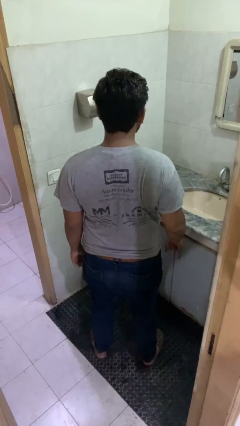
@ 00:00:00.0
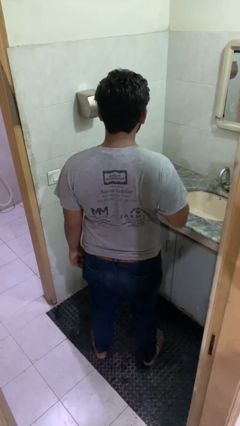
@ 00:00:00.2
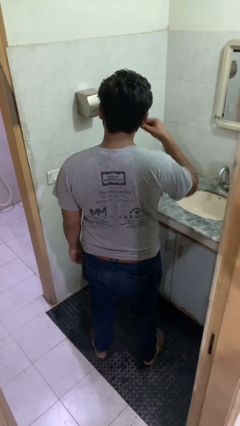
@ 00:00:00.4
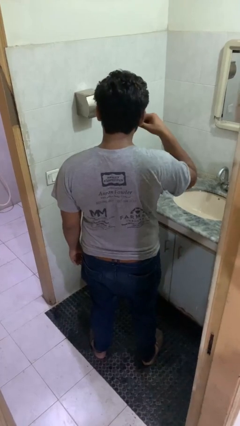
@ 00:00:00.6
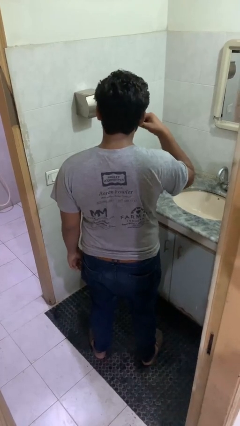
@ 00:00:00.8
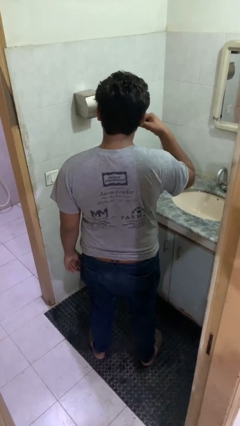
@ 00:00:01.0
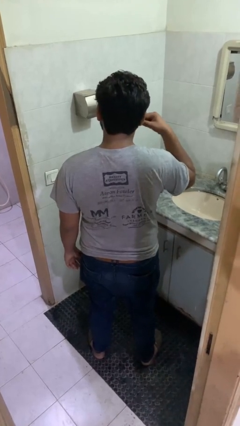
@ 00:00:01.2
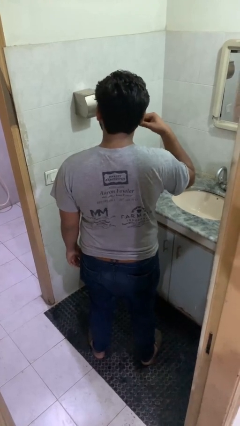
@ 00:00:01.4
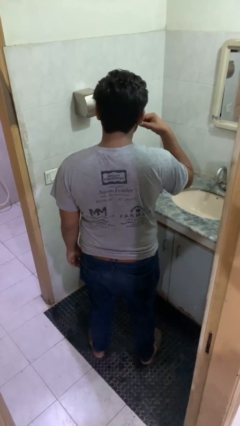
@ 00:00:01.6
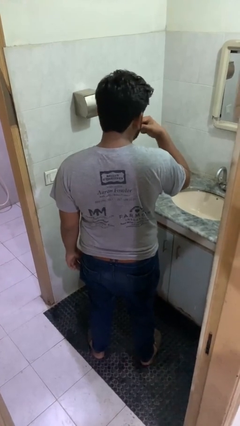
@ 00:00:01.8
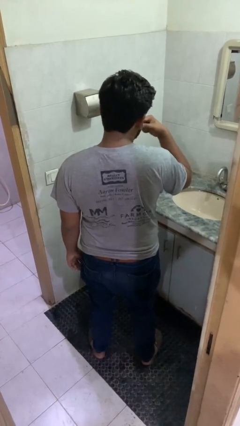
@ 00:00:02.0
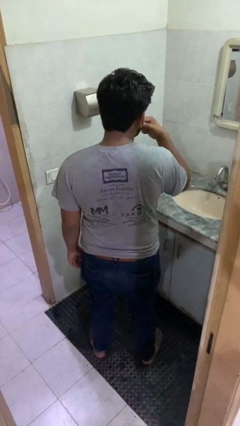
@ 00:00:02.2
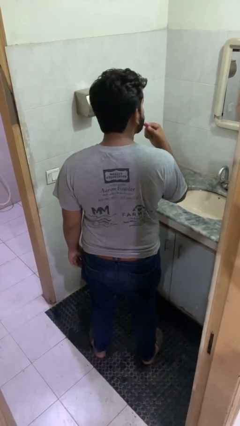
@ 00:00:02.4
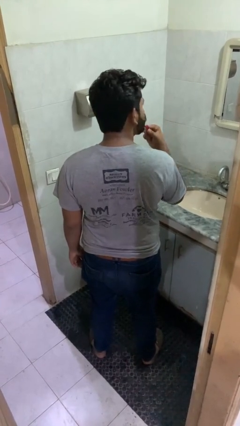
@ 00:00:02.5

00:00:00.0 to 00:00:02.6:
person brushes teeth

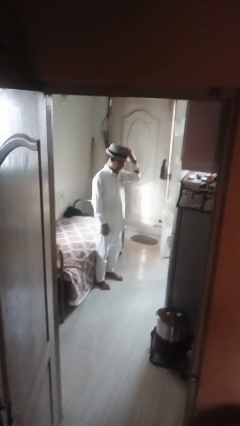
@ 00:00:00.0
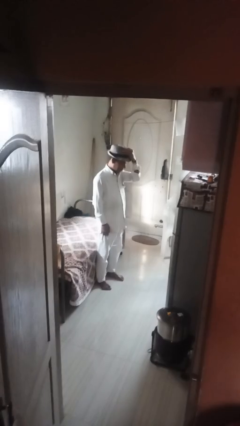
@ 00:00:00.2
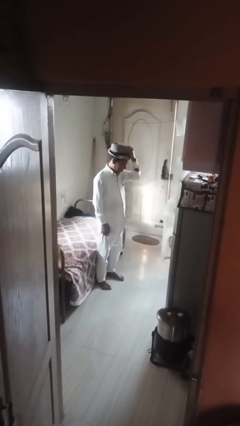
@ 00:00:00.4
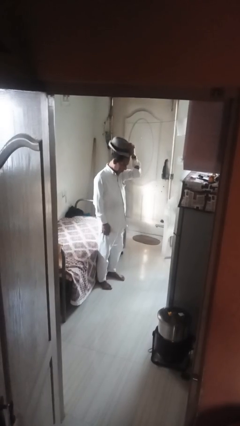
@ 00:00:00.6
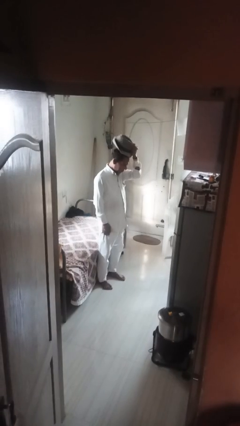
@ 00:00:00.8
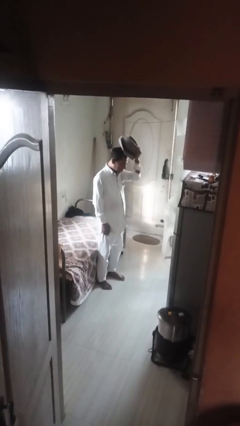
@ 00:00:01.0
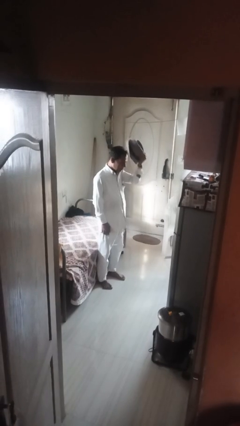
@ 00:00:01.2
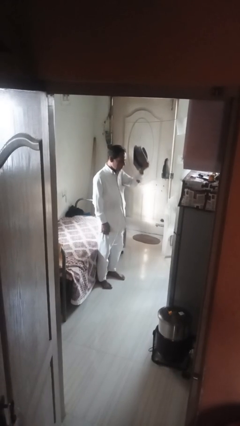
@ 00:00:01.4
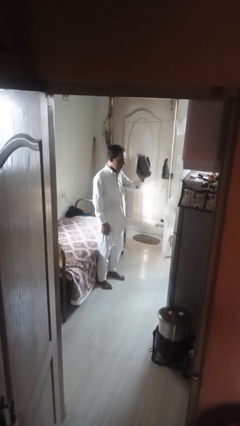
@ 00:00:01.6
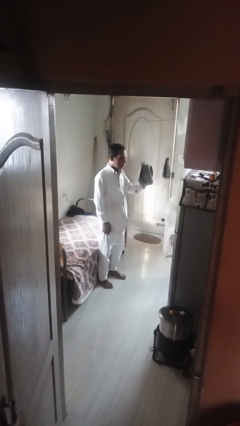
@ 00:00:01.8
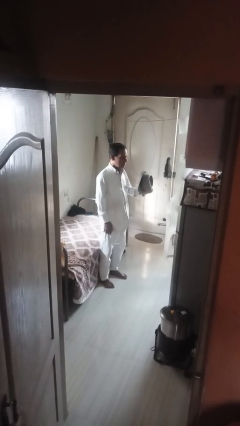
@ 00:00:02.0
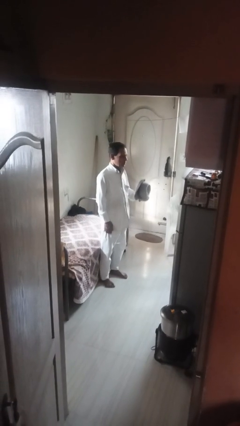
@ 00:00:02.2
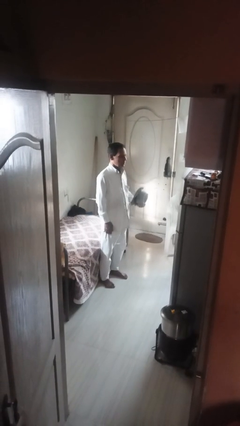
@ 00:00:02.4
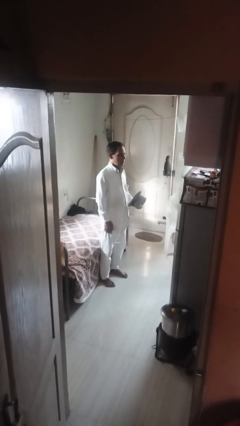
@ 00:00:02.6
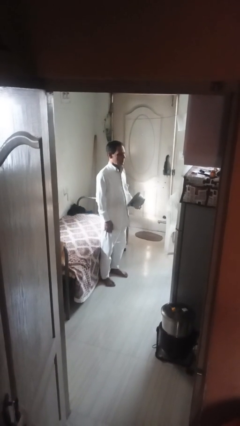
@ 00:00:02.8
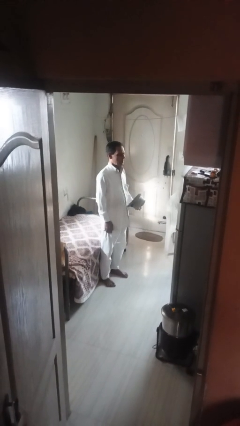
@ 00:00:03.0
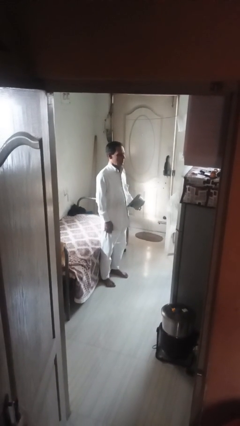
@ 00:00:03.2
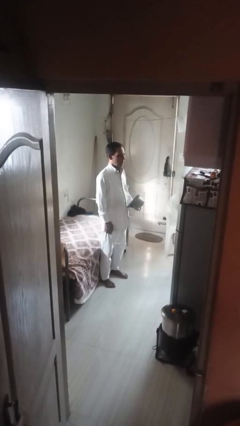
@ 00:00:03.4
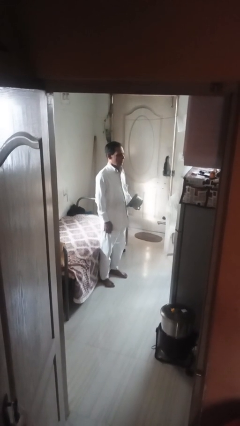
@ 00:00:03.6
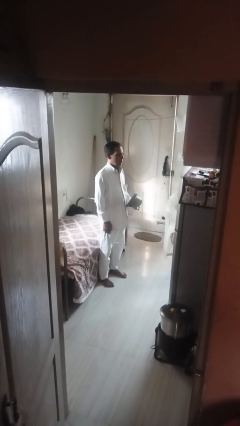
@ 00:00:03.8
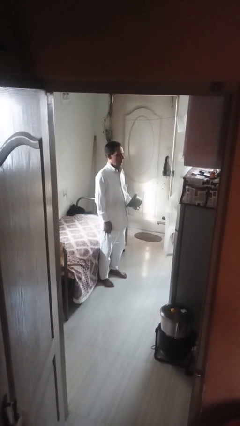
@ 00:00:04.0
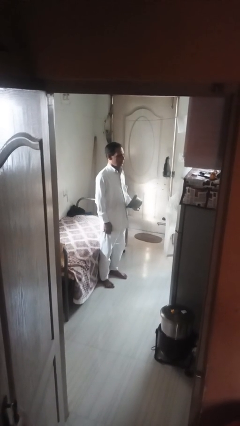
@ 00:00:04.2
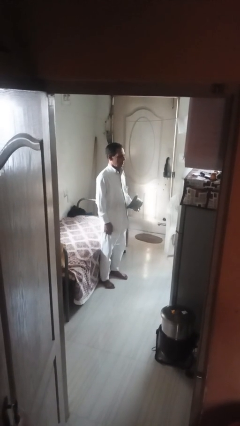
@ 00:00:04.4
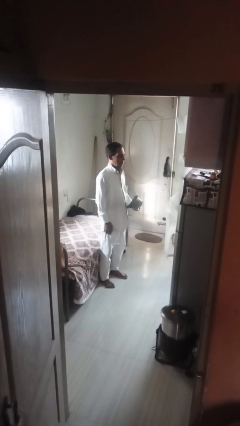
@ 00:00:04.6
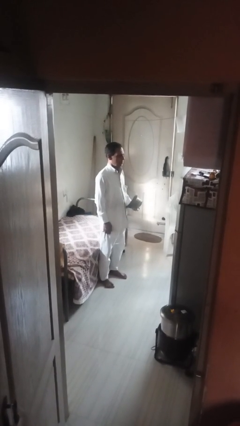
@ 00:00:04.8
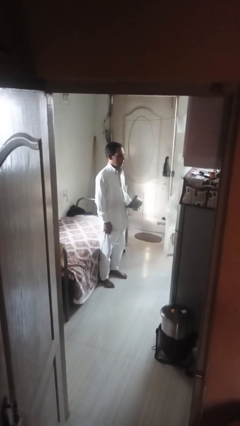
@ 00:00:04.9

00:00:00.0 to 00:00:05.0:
person takes off hat

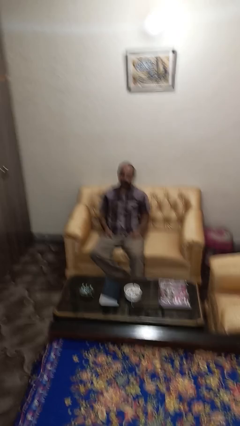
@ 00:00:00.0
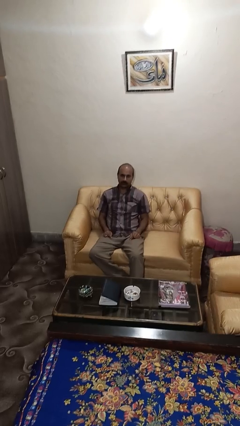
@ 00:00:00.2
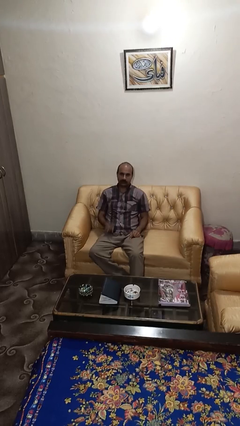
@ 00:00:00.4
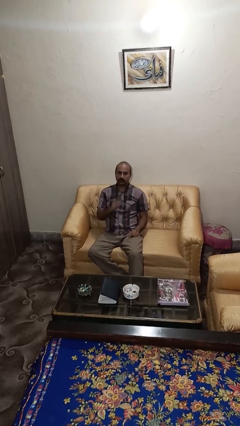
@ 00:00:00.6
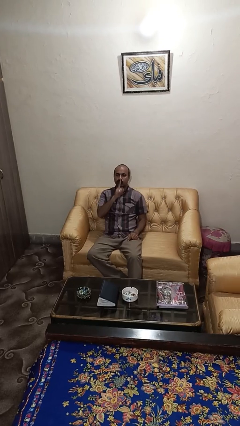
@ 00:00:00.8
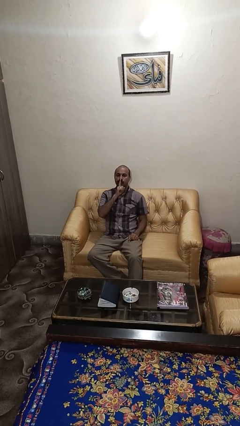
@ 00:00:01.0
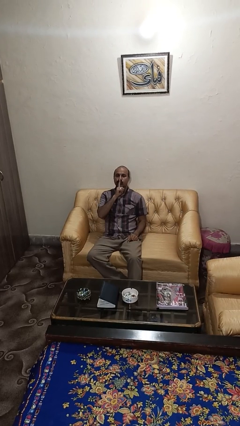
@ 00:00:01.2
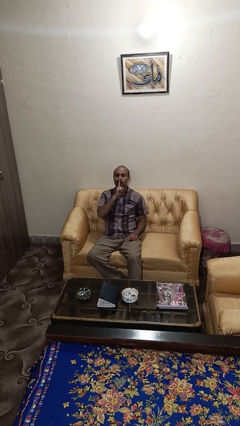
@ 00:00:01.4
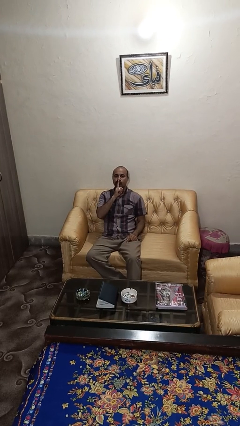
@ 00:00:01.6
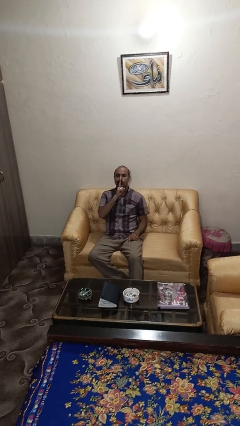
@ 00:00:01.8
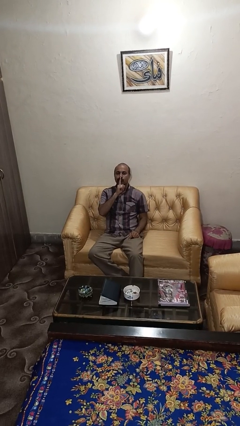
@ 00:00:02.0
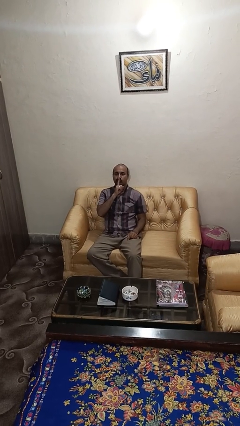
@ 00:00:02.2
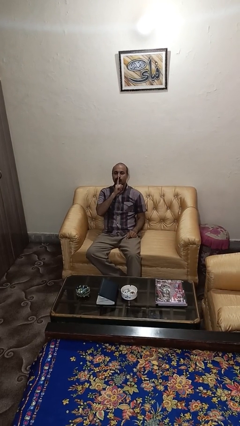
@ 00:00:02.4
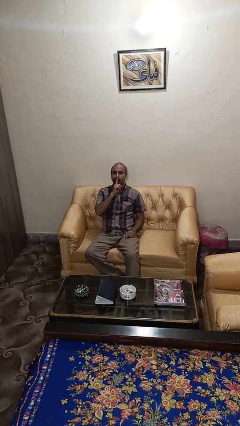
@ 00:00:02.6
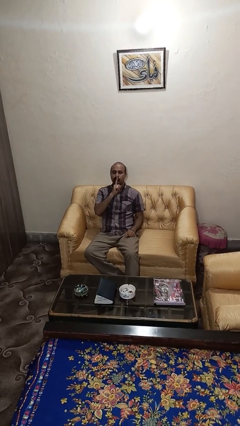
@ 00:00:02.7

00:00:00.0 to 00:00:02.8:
person gestures be quiet

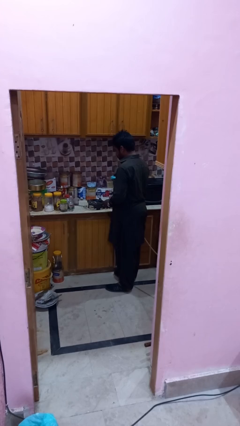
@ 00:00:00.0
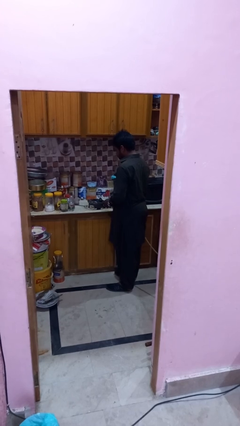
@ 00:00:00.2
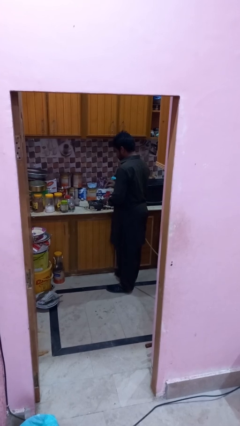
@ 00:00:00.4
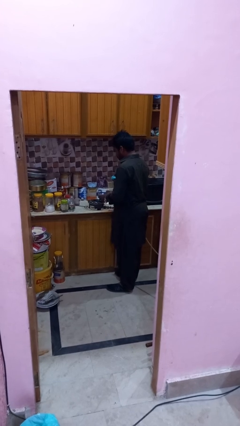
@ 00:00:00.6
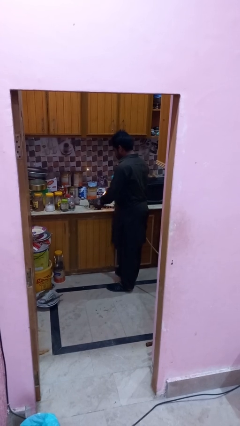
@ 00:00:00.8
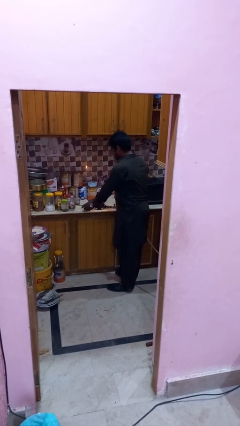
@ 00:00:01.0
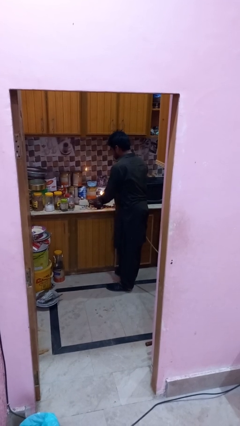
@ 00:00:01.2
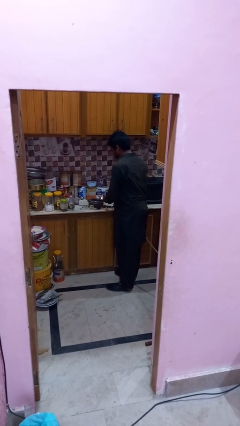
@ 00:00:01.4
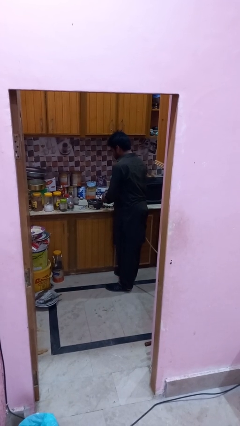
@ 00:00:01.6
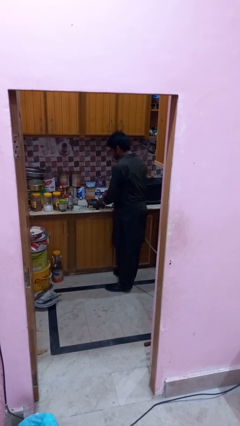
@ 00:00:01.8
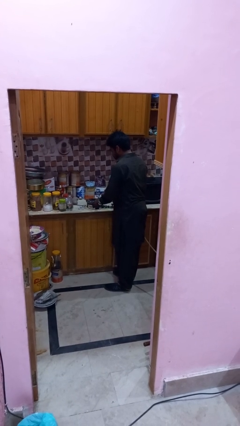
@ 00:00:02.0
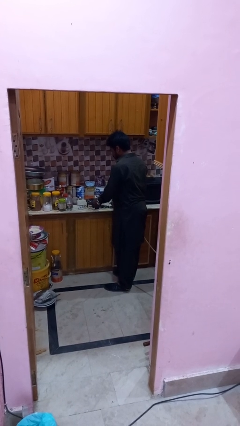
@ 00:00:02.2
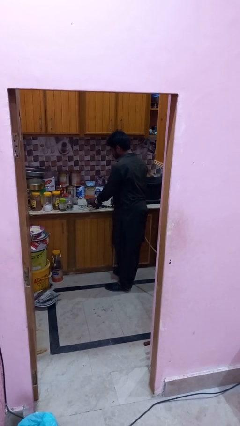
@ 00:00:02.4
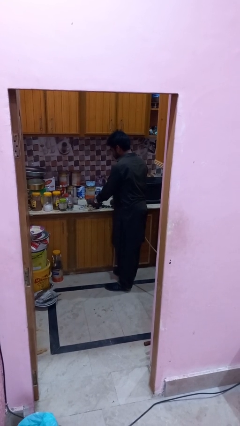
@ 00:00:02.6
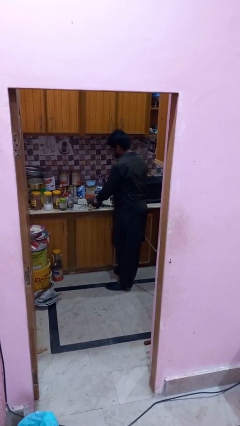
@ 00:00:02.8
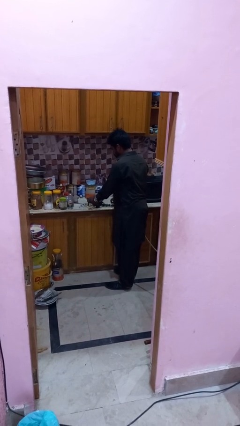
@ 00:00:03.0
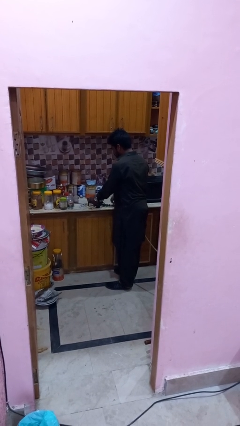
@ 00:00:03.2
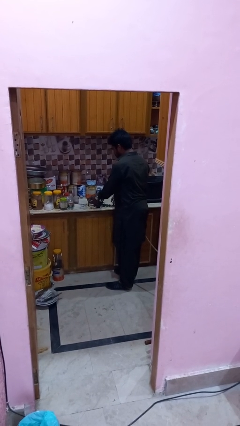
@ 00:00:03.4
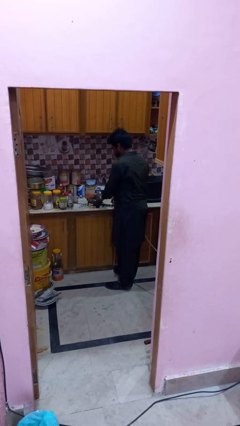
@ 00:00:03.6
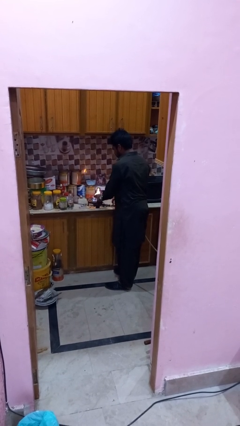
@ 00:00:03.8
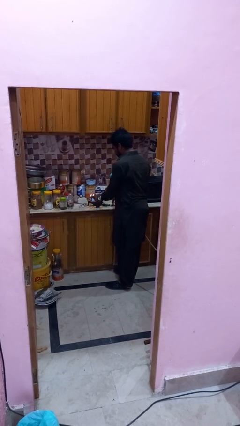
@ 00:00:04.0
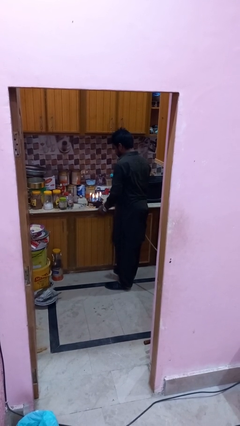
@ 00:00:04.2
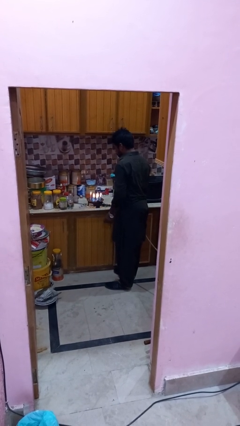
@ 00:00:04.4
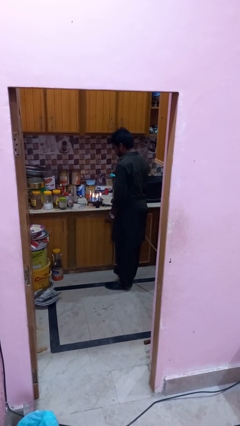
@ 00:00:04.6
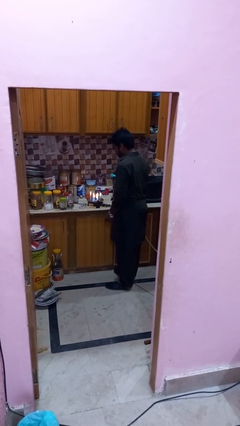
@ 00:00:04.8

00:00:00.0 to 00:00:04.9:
person turns on stovetop

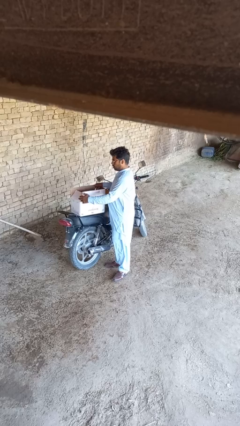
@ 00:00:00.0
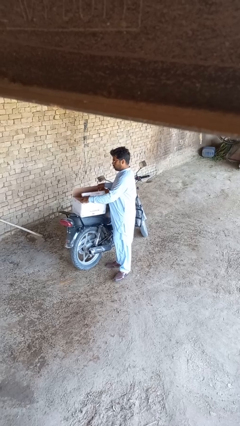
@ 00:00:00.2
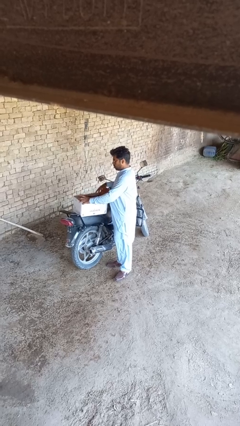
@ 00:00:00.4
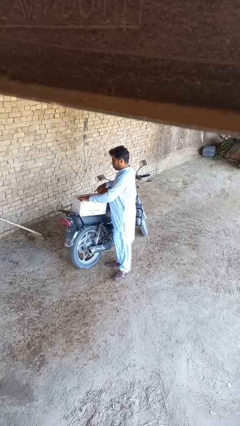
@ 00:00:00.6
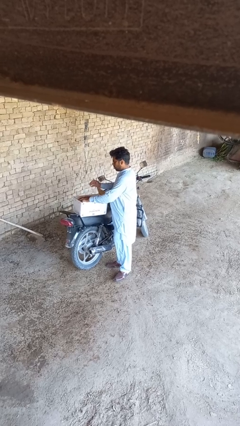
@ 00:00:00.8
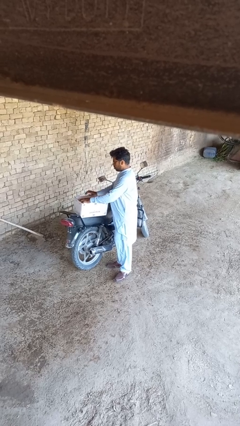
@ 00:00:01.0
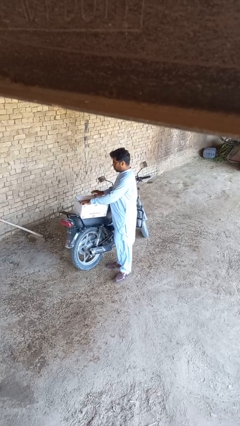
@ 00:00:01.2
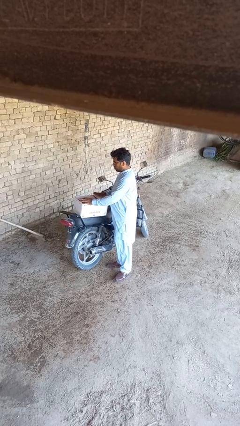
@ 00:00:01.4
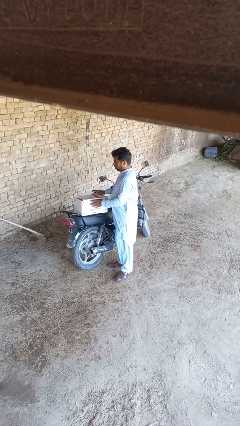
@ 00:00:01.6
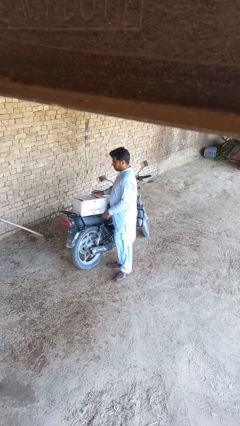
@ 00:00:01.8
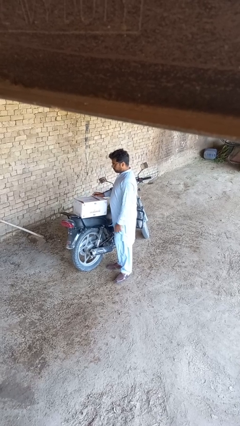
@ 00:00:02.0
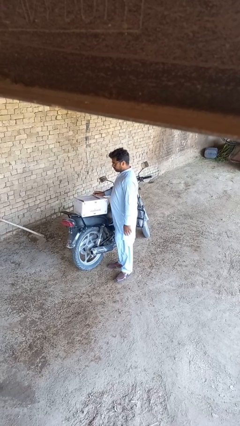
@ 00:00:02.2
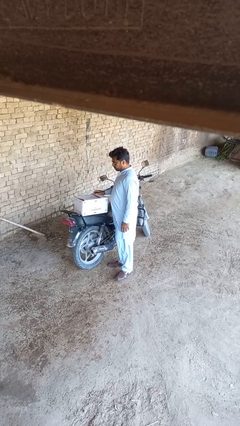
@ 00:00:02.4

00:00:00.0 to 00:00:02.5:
person closes box
